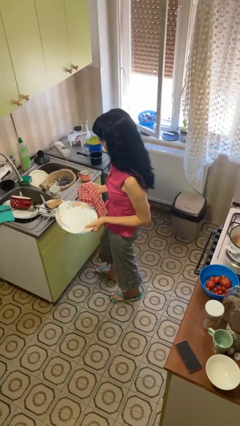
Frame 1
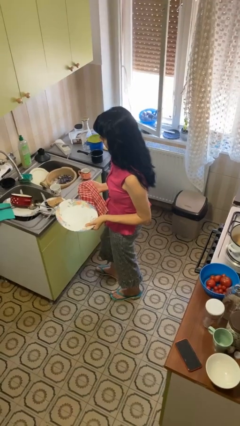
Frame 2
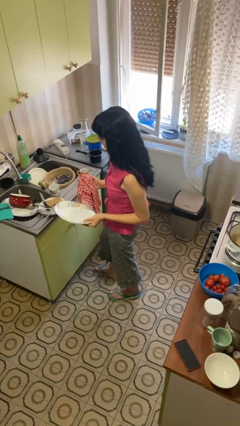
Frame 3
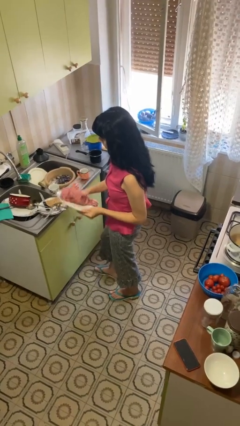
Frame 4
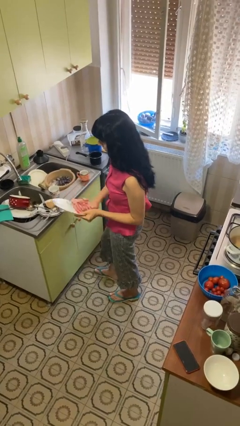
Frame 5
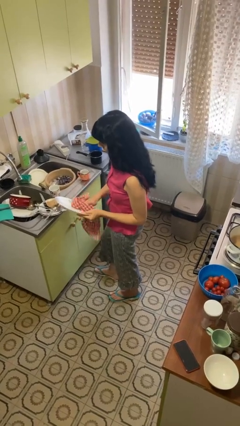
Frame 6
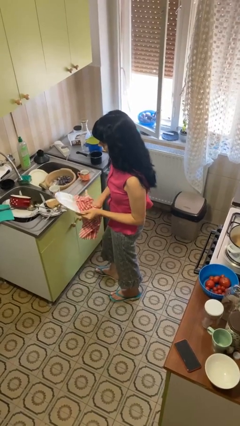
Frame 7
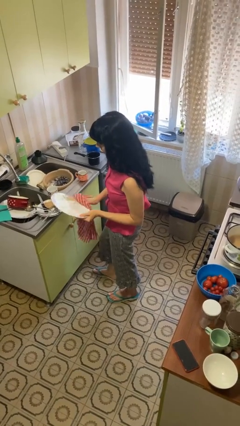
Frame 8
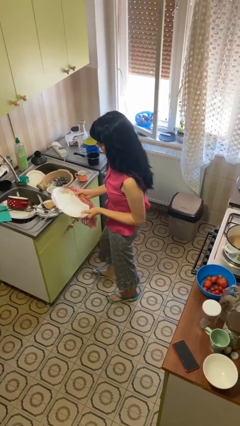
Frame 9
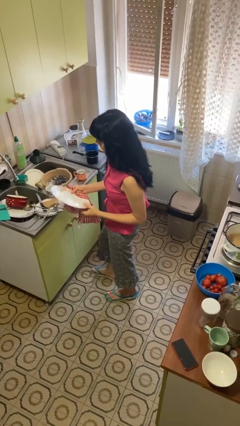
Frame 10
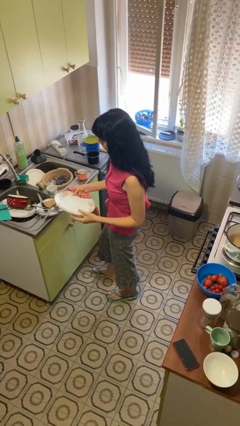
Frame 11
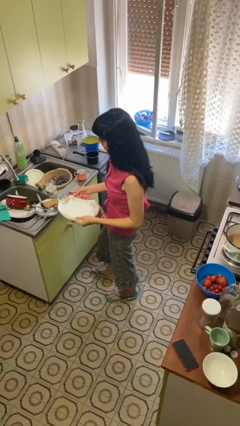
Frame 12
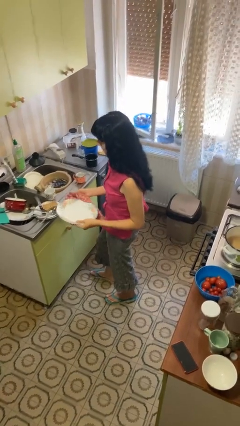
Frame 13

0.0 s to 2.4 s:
person dries dish

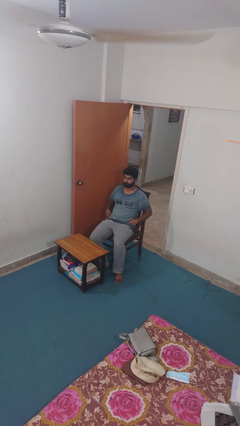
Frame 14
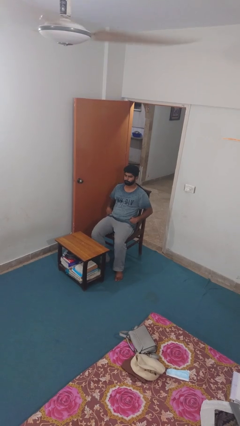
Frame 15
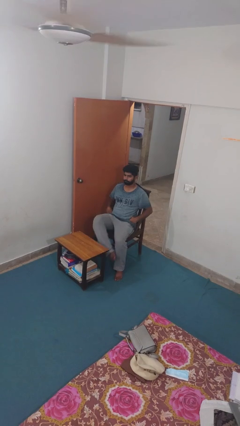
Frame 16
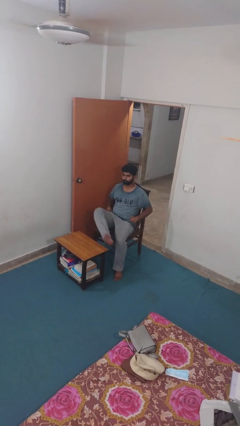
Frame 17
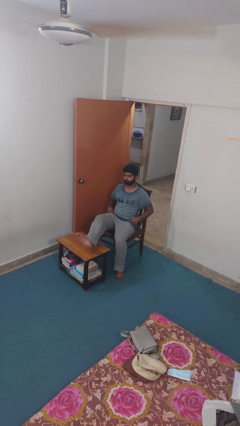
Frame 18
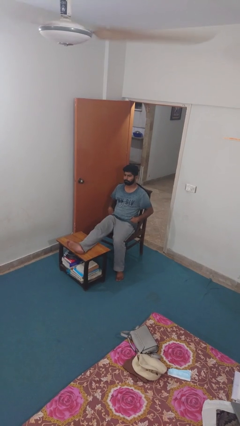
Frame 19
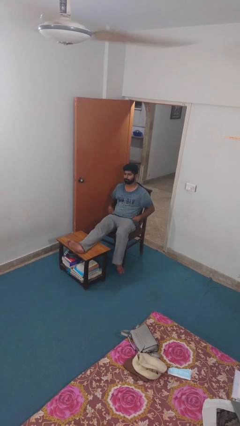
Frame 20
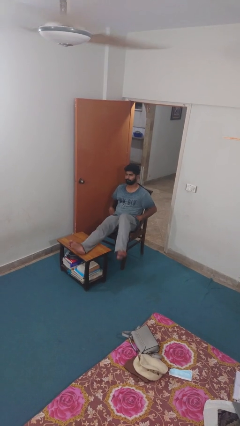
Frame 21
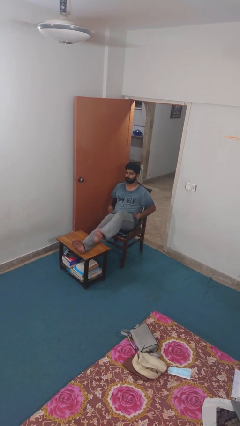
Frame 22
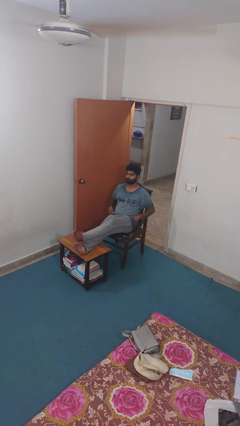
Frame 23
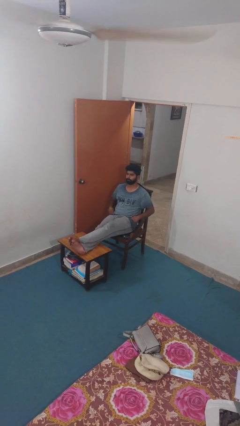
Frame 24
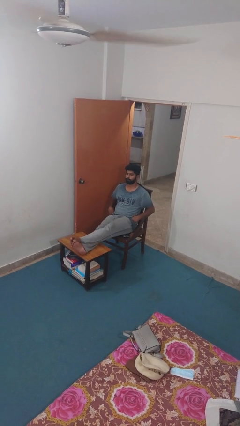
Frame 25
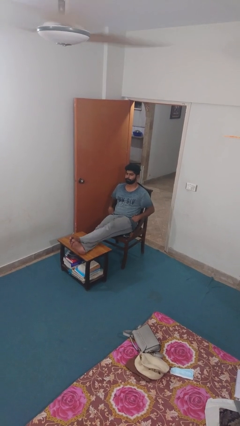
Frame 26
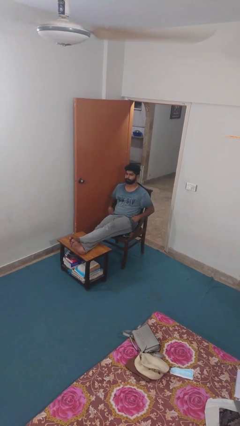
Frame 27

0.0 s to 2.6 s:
person puts feet up

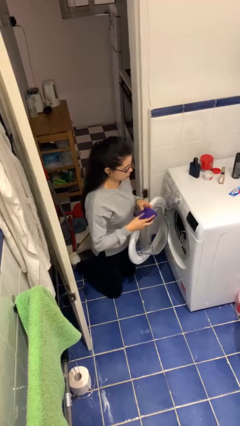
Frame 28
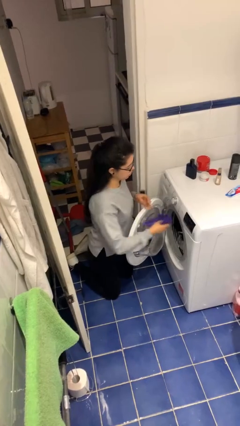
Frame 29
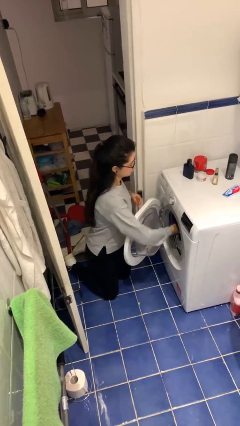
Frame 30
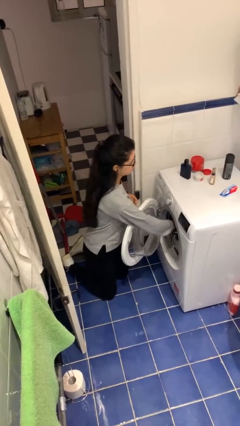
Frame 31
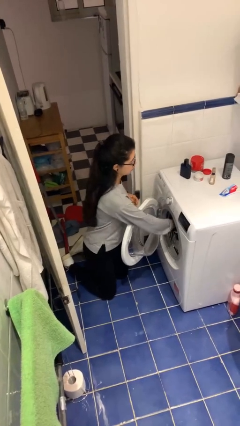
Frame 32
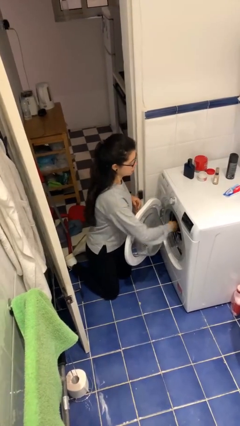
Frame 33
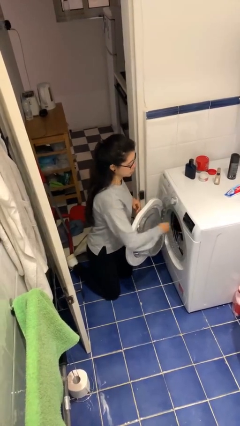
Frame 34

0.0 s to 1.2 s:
person loads clotheswasher

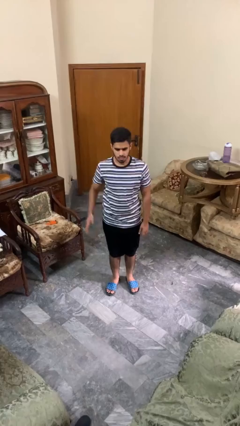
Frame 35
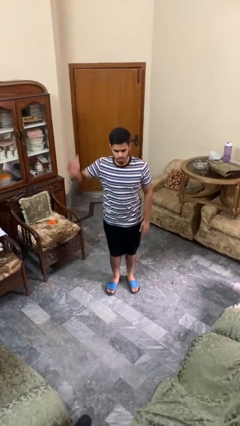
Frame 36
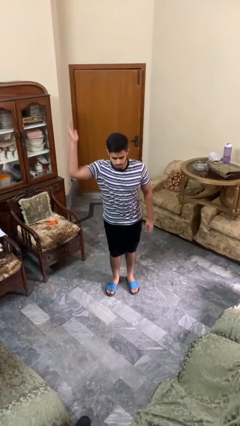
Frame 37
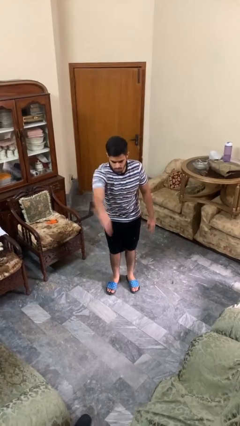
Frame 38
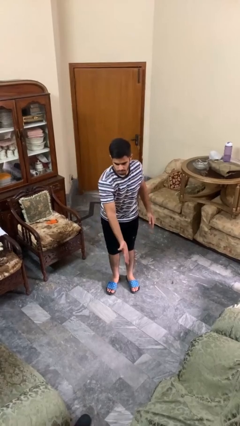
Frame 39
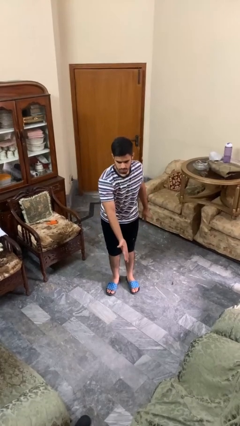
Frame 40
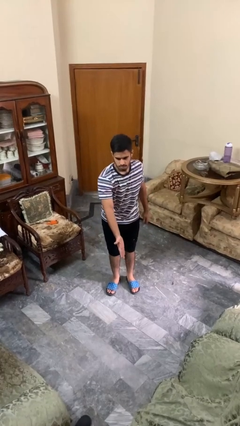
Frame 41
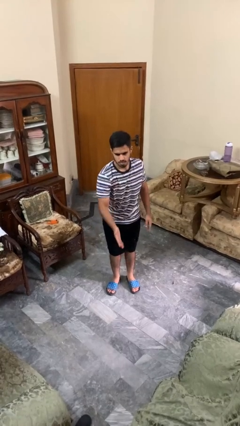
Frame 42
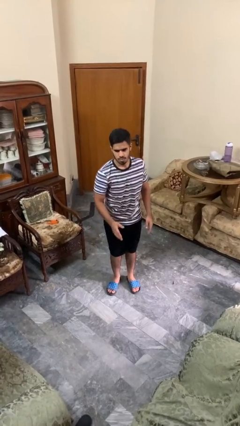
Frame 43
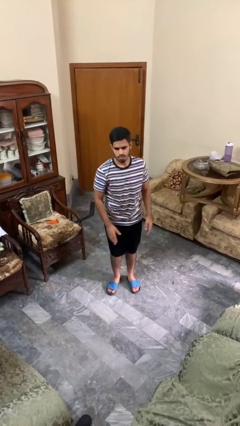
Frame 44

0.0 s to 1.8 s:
person karate chop

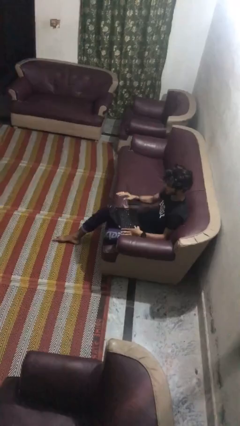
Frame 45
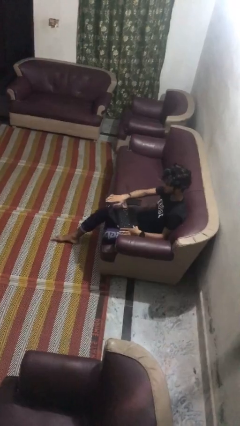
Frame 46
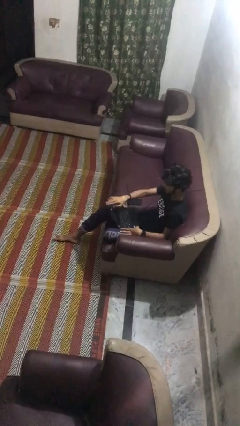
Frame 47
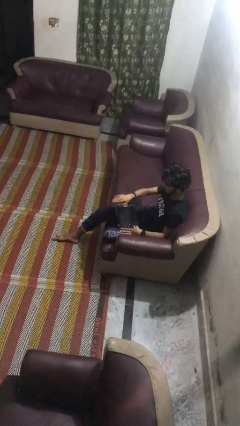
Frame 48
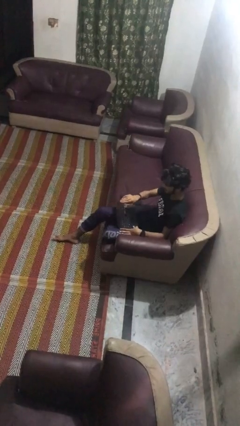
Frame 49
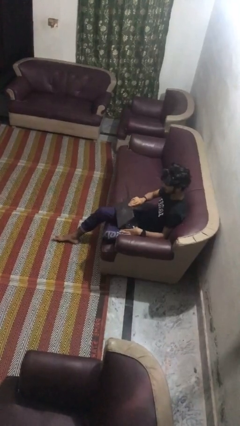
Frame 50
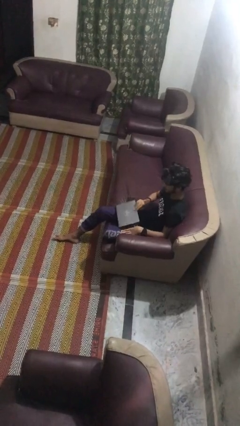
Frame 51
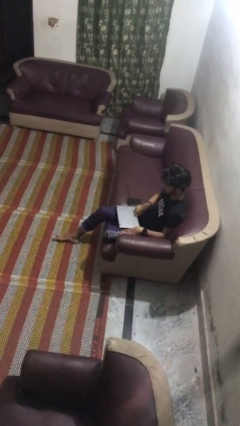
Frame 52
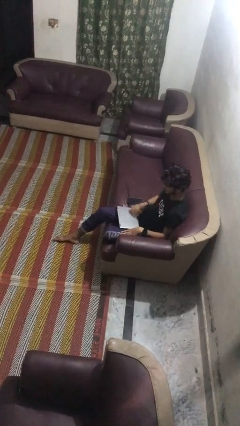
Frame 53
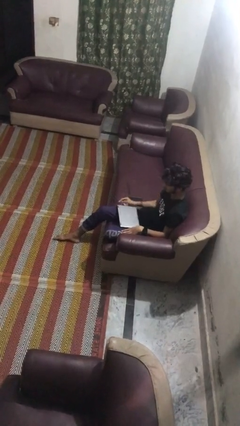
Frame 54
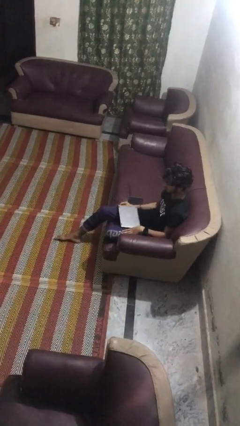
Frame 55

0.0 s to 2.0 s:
person closes laptop

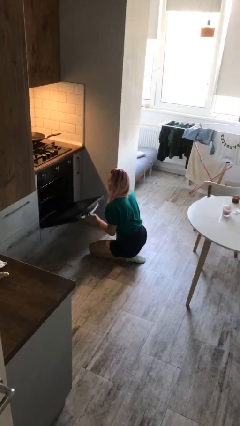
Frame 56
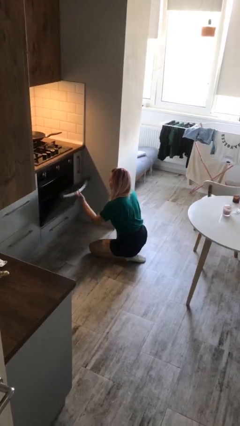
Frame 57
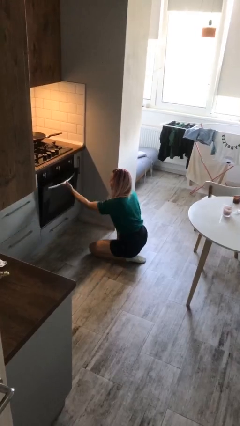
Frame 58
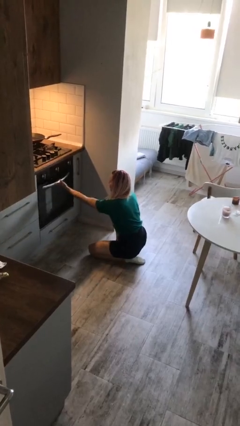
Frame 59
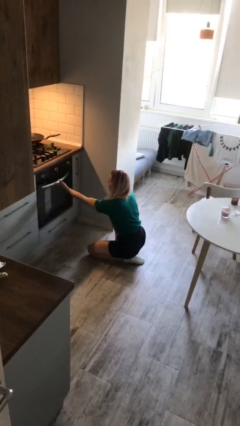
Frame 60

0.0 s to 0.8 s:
person closes oven door

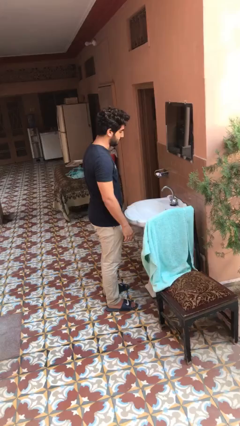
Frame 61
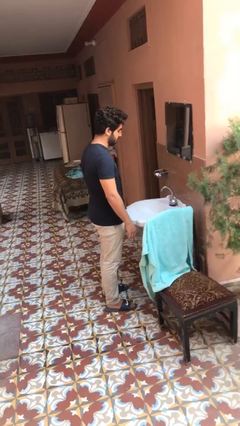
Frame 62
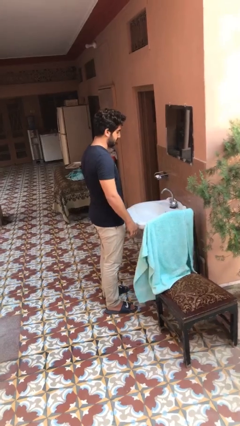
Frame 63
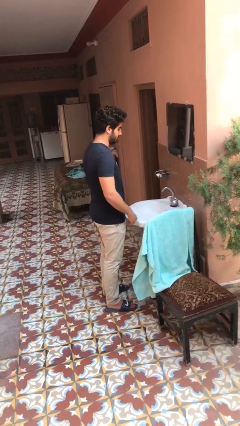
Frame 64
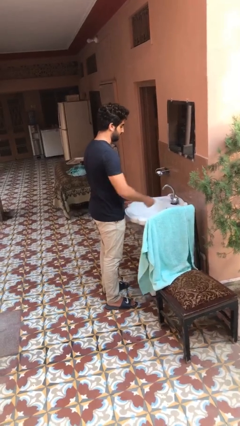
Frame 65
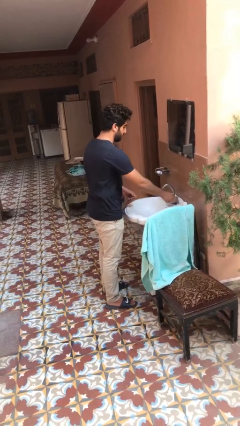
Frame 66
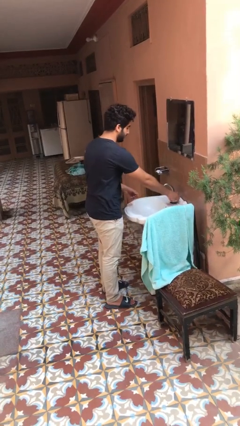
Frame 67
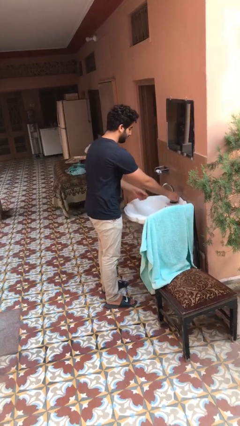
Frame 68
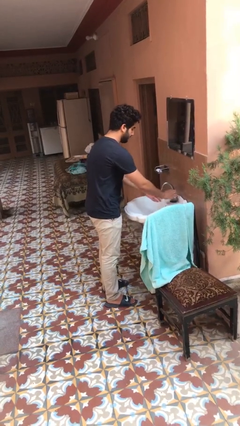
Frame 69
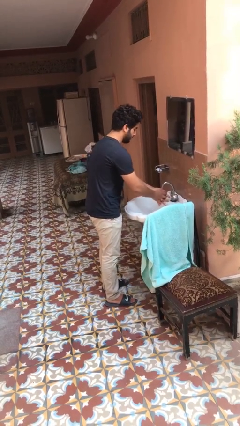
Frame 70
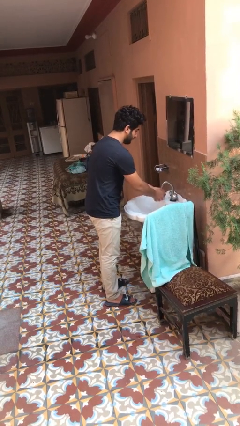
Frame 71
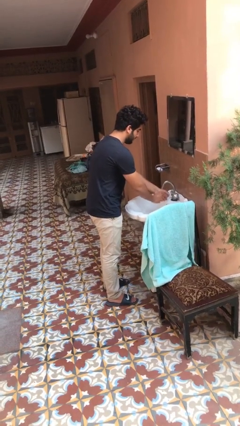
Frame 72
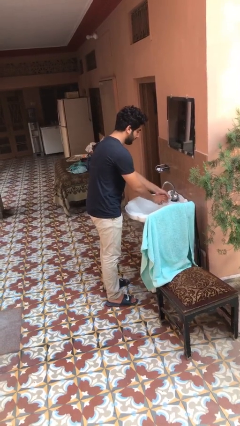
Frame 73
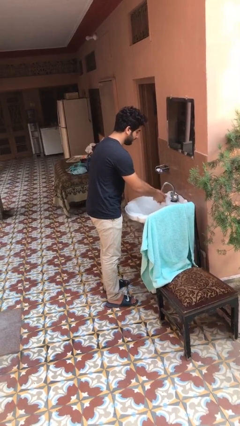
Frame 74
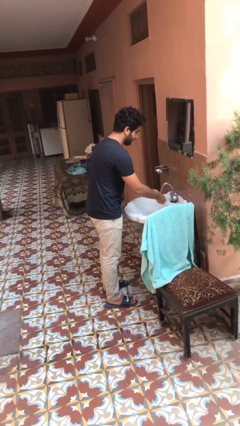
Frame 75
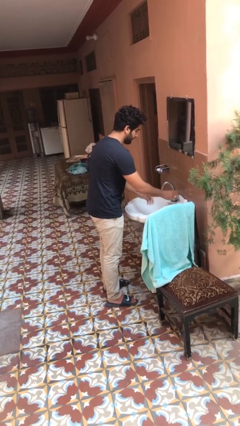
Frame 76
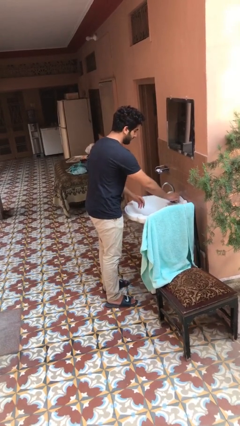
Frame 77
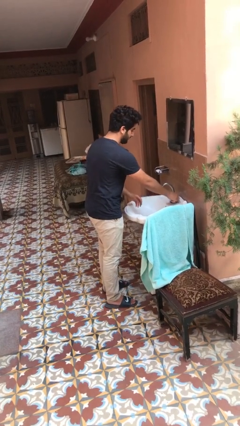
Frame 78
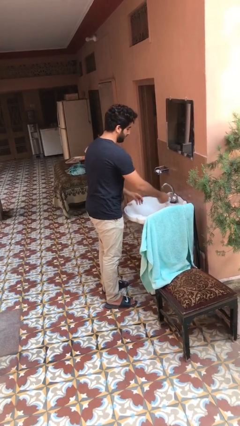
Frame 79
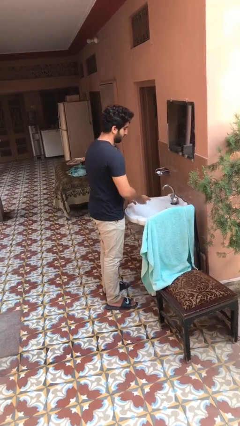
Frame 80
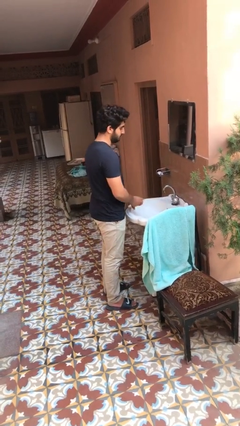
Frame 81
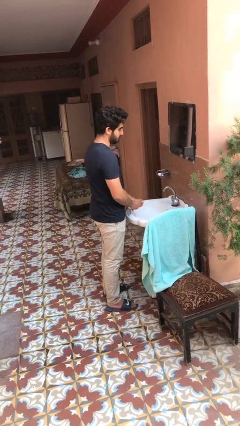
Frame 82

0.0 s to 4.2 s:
person washes hands

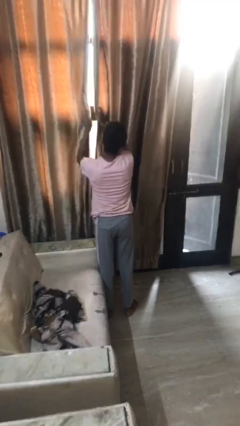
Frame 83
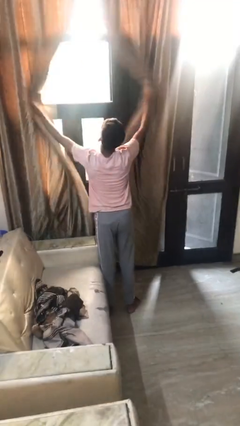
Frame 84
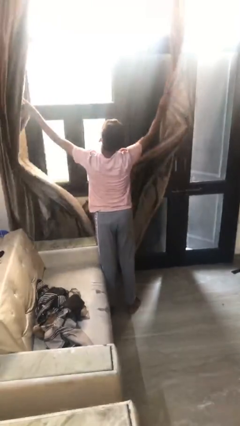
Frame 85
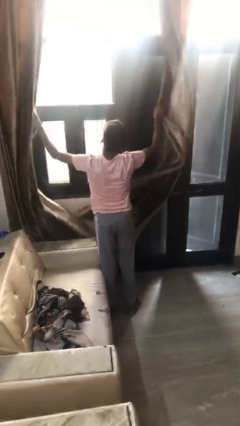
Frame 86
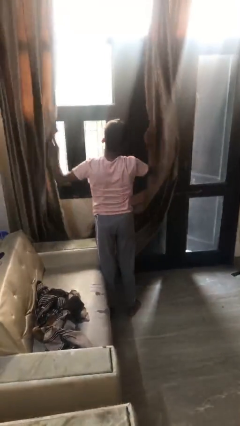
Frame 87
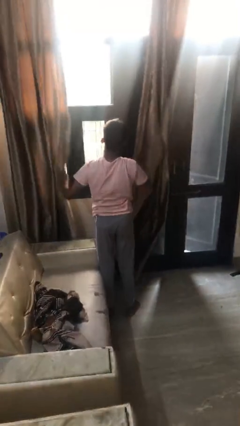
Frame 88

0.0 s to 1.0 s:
person opens curtains

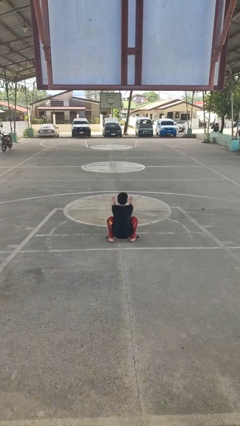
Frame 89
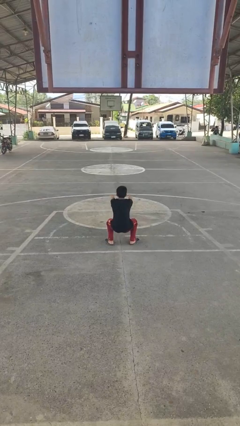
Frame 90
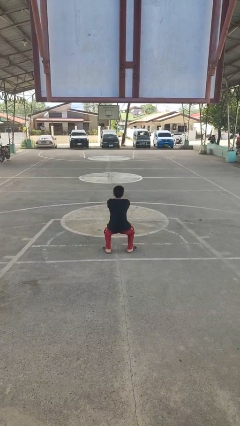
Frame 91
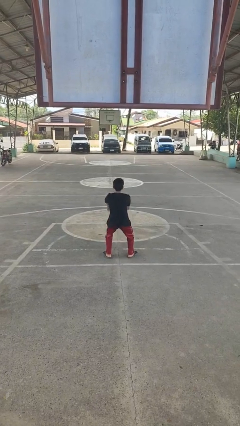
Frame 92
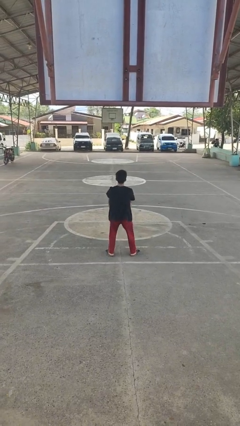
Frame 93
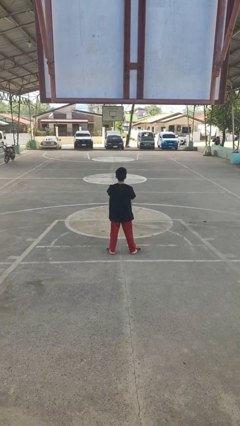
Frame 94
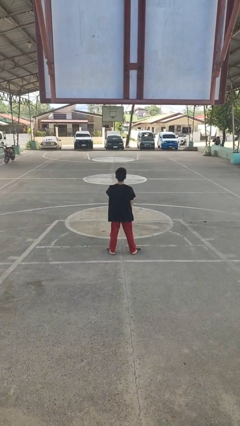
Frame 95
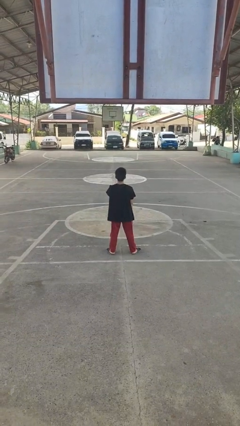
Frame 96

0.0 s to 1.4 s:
person stands up
